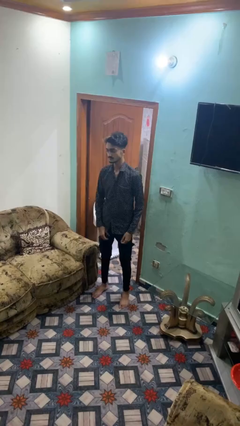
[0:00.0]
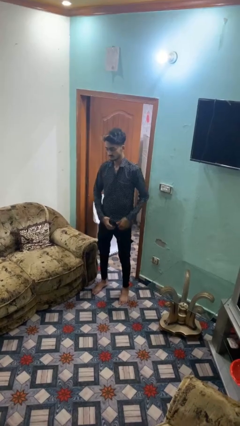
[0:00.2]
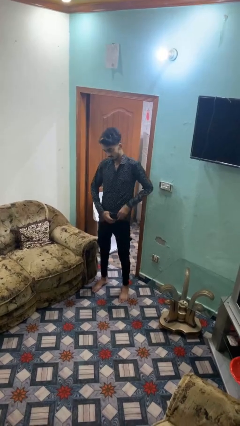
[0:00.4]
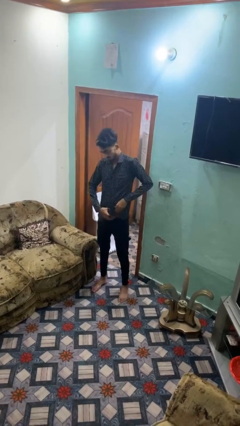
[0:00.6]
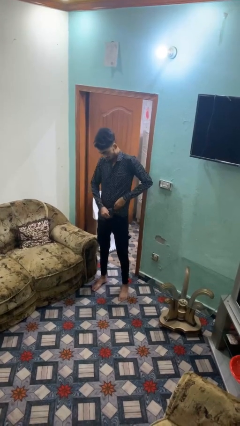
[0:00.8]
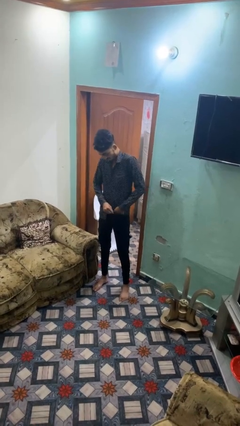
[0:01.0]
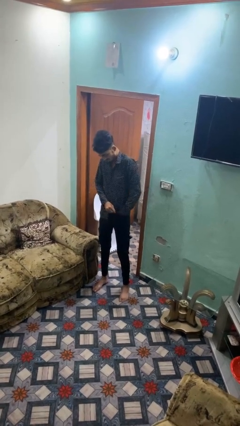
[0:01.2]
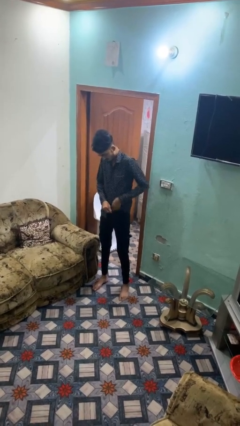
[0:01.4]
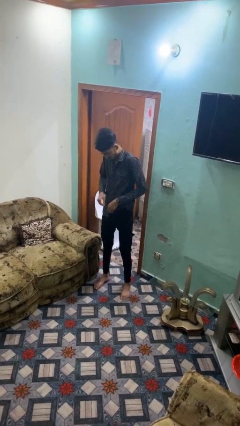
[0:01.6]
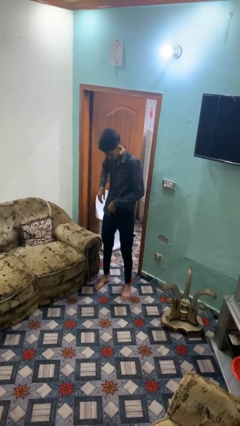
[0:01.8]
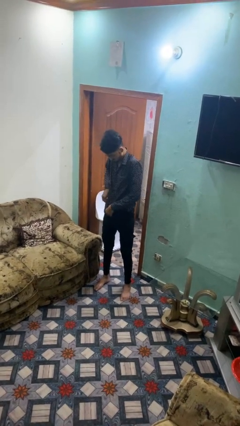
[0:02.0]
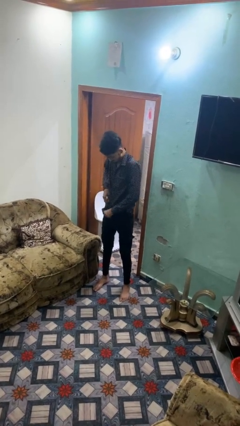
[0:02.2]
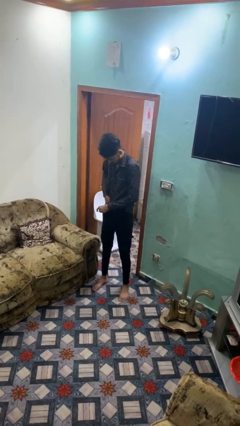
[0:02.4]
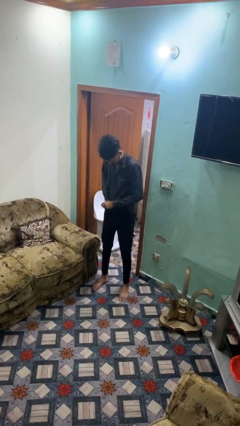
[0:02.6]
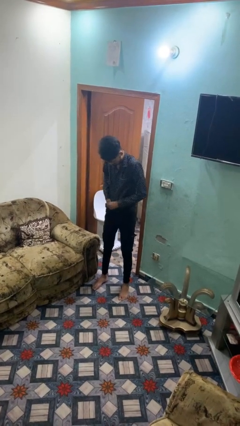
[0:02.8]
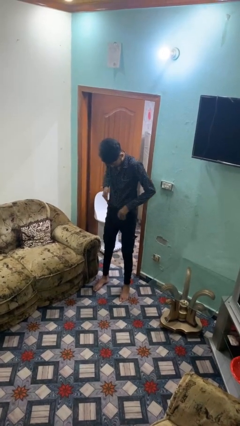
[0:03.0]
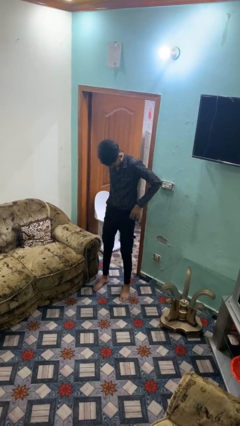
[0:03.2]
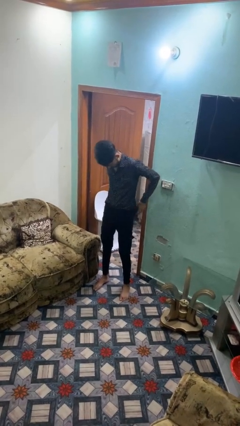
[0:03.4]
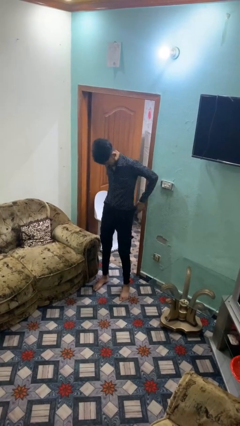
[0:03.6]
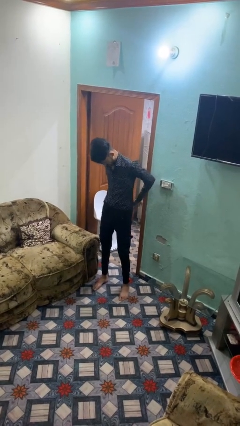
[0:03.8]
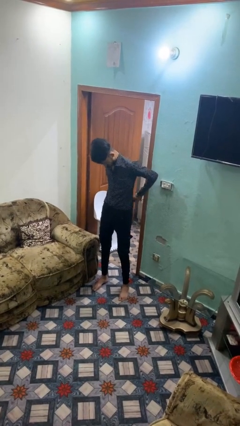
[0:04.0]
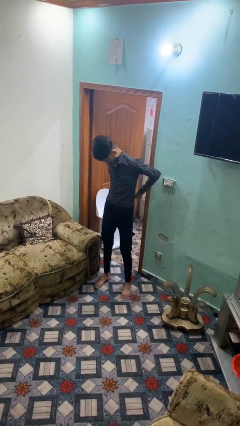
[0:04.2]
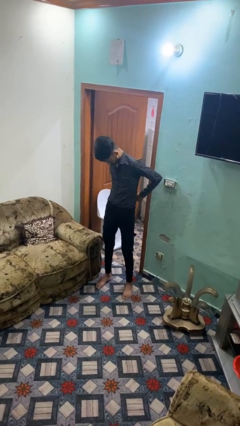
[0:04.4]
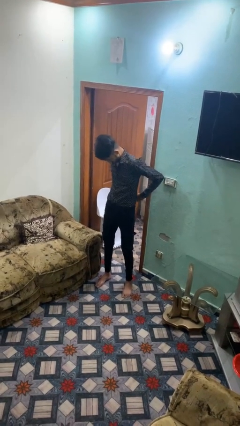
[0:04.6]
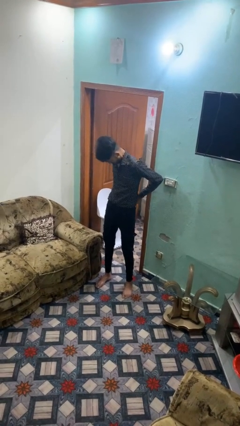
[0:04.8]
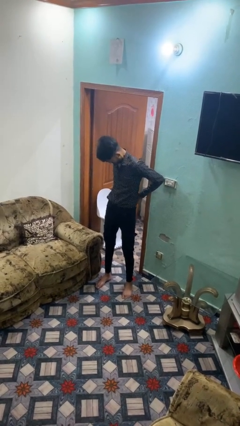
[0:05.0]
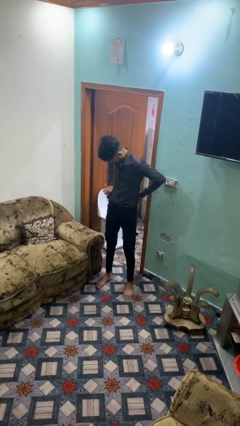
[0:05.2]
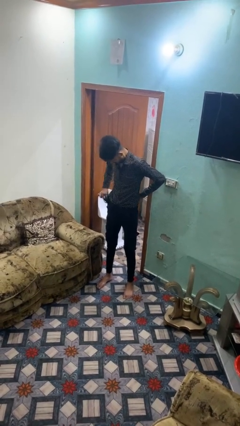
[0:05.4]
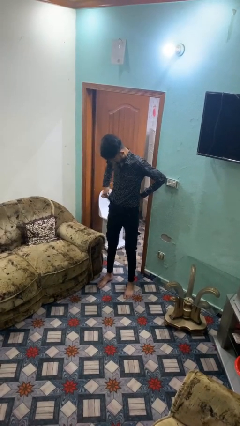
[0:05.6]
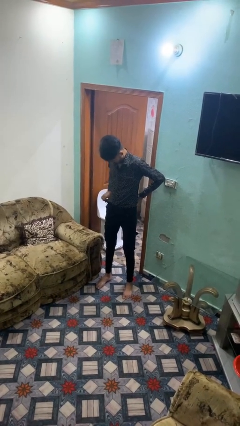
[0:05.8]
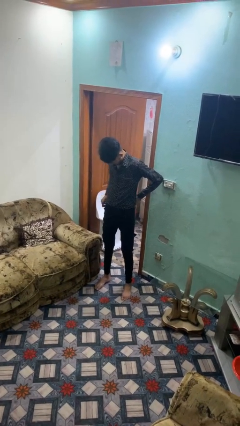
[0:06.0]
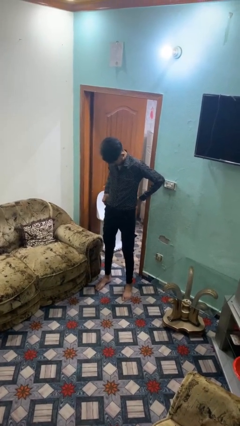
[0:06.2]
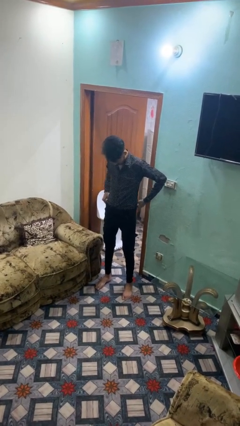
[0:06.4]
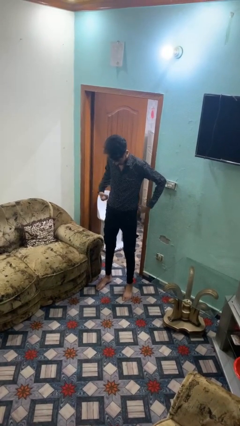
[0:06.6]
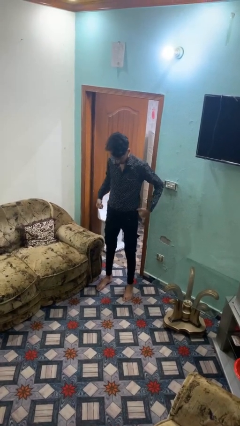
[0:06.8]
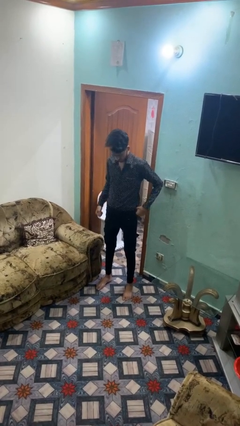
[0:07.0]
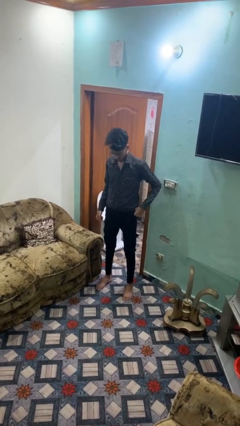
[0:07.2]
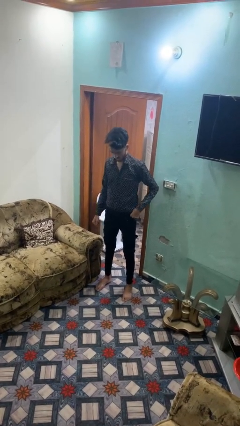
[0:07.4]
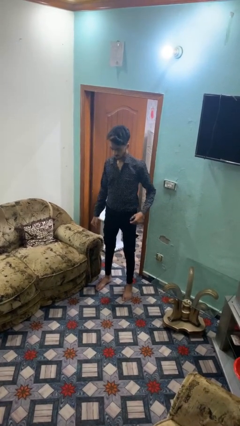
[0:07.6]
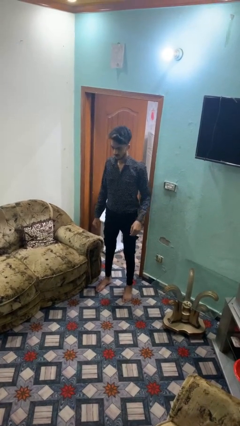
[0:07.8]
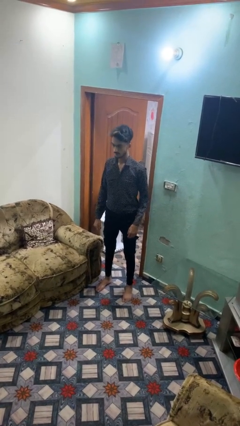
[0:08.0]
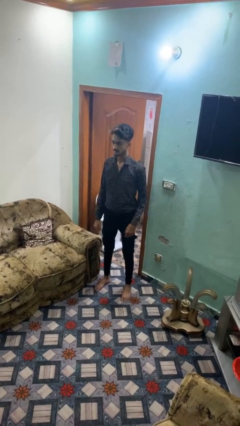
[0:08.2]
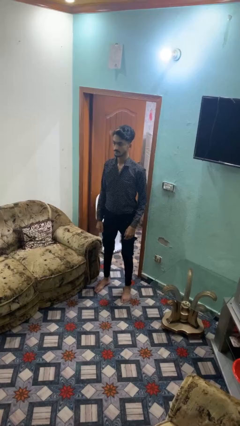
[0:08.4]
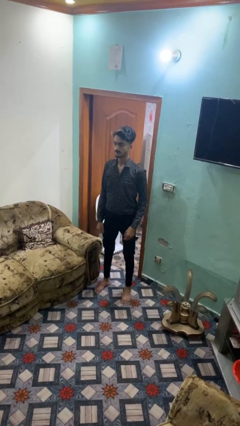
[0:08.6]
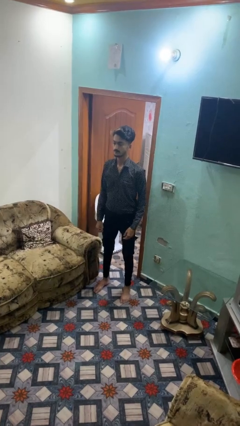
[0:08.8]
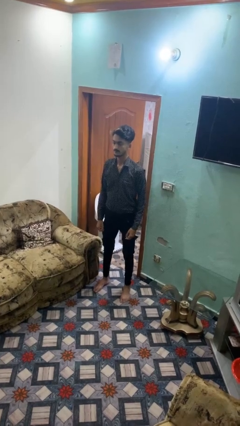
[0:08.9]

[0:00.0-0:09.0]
person tucks in shirt

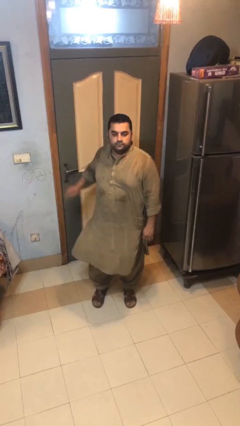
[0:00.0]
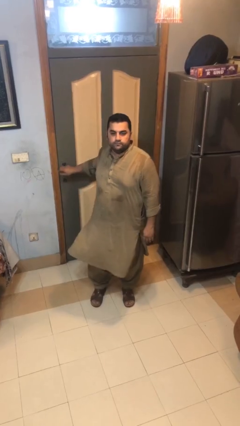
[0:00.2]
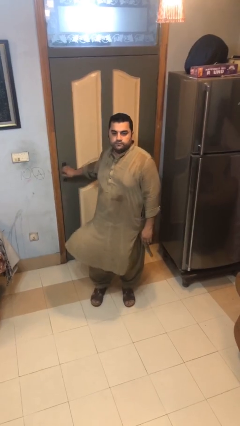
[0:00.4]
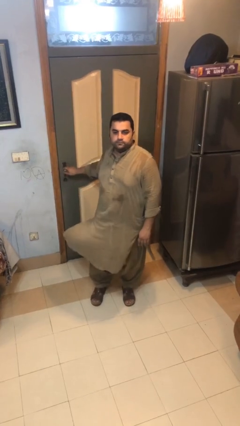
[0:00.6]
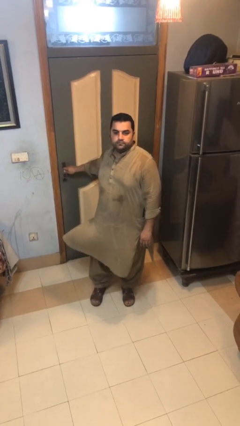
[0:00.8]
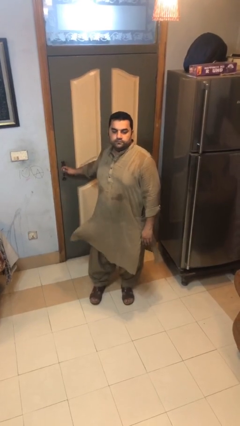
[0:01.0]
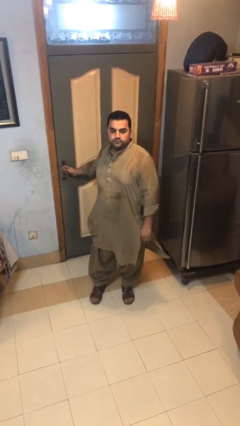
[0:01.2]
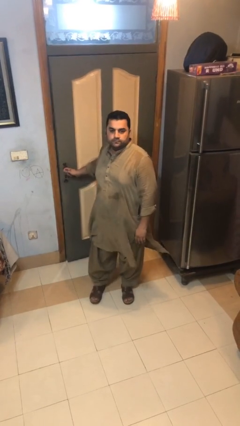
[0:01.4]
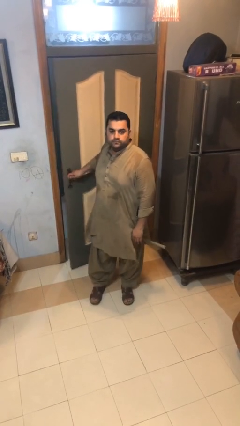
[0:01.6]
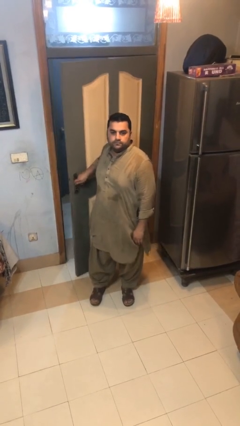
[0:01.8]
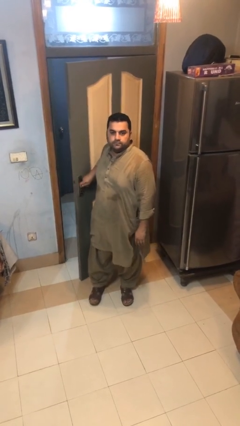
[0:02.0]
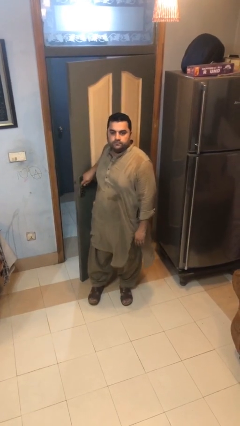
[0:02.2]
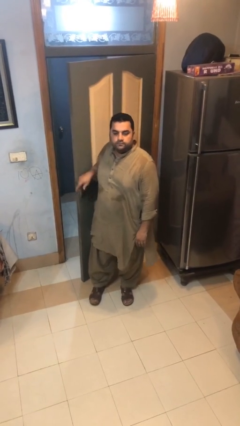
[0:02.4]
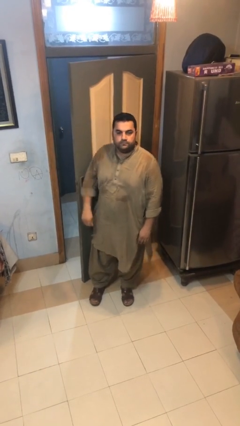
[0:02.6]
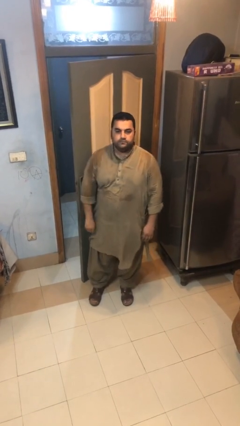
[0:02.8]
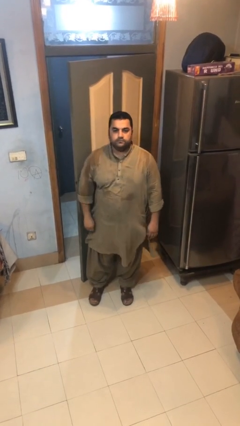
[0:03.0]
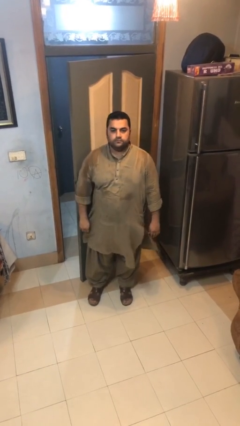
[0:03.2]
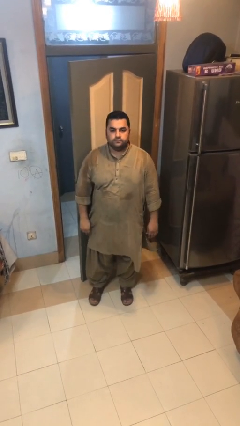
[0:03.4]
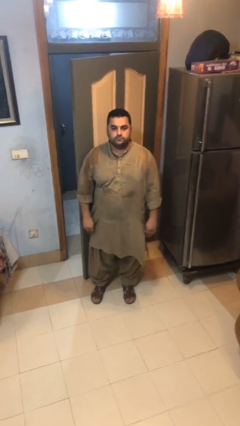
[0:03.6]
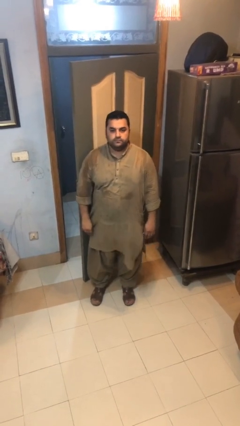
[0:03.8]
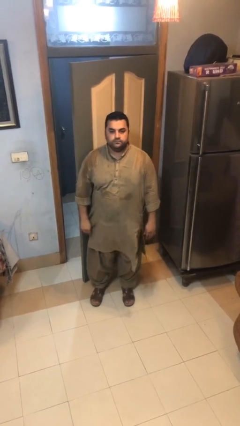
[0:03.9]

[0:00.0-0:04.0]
person opens facility door

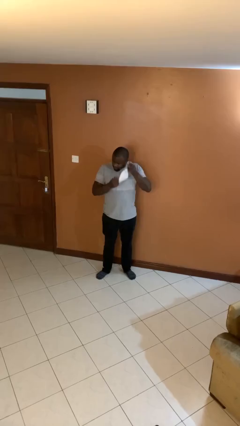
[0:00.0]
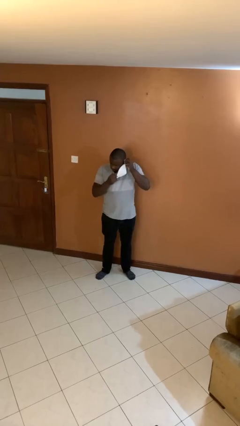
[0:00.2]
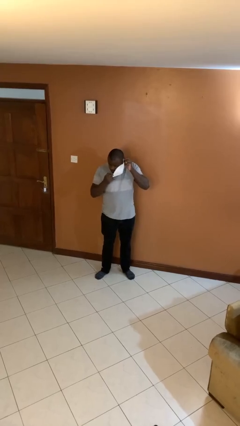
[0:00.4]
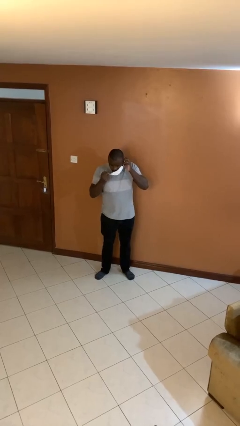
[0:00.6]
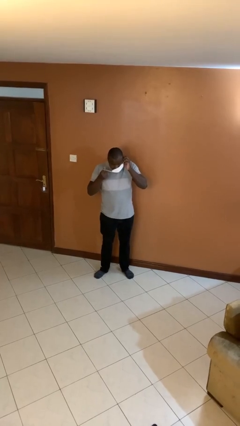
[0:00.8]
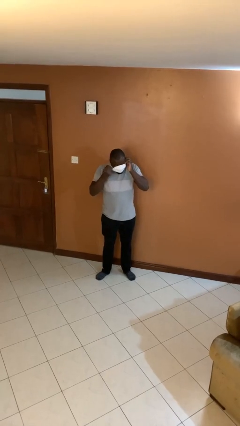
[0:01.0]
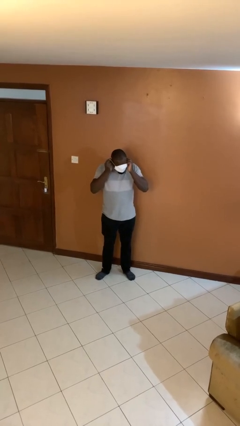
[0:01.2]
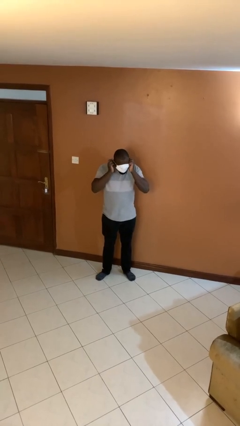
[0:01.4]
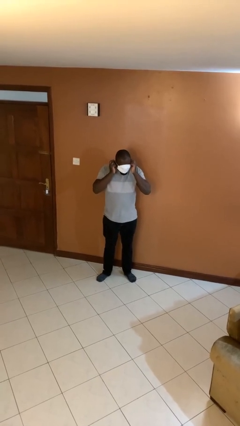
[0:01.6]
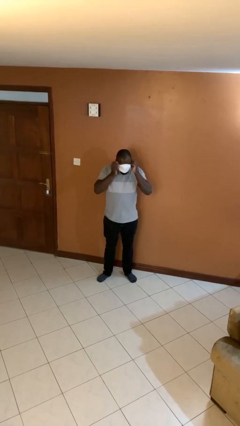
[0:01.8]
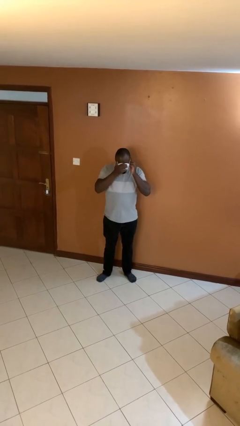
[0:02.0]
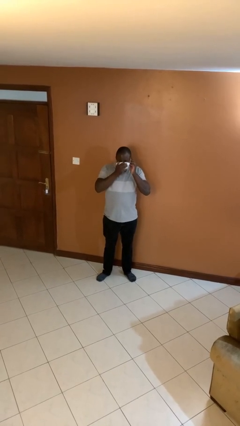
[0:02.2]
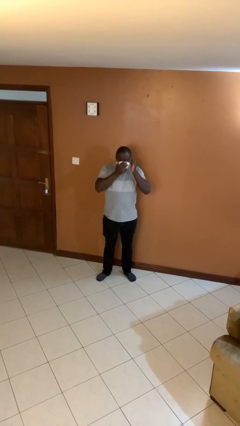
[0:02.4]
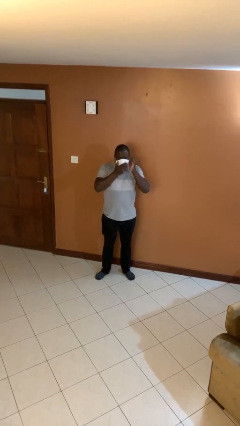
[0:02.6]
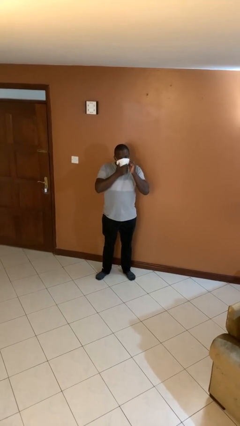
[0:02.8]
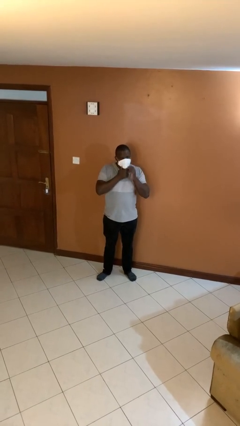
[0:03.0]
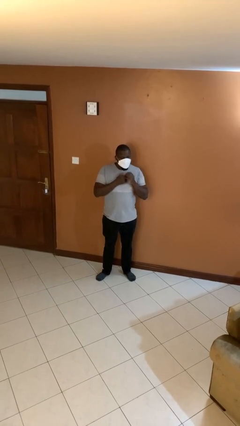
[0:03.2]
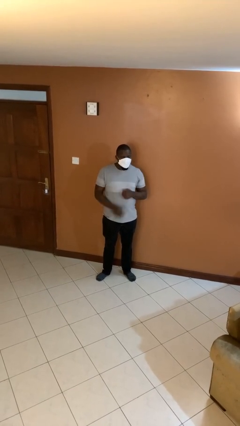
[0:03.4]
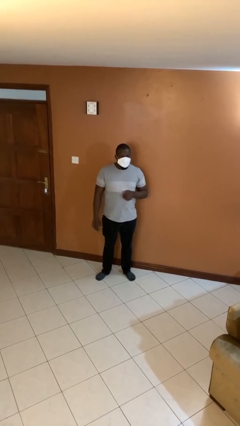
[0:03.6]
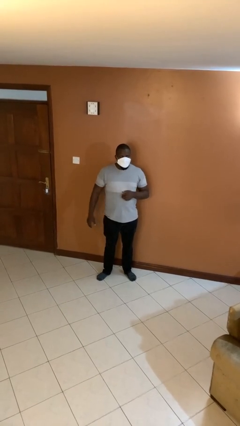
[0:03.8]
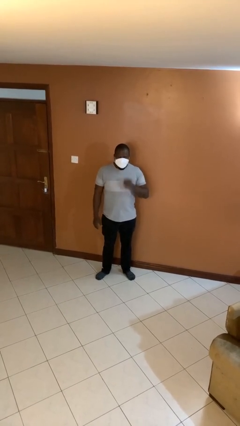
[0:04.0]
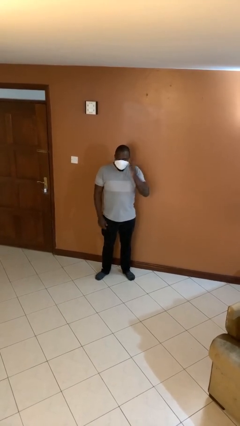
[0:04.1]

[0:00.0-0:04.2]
person puts on facemask

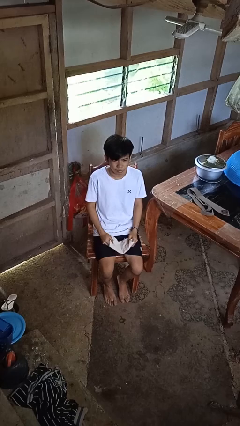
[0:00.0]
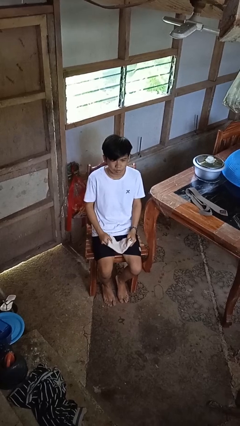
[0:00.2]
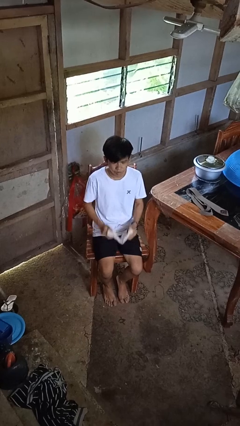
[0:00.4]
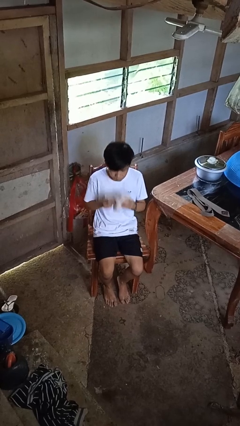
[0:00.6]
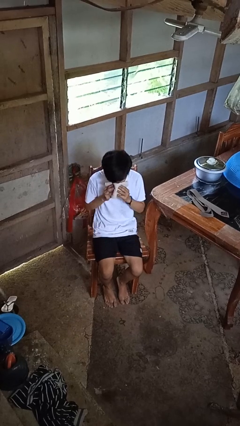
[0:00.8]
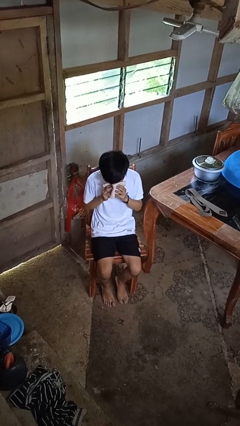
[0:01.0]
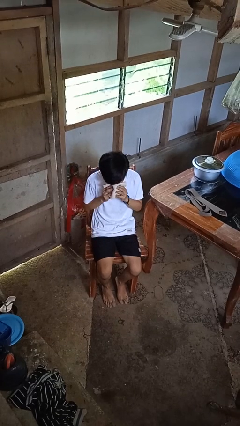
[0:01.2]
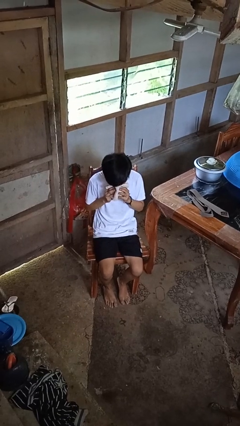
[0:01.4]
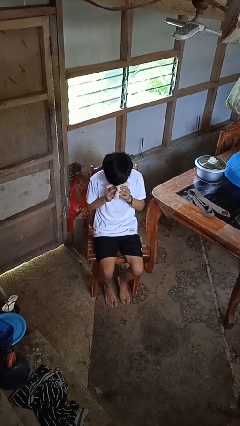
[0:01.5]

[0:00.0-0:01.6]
person blows nose
